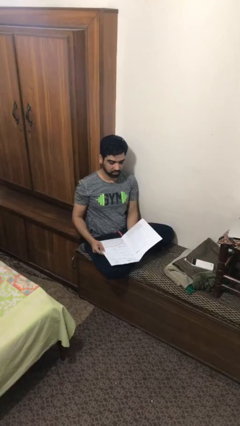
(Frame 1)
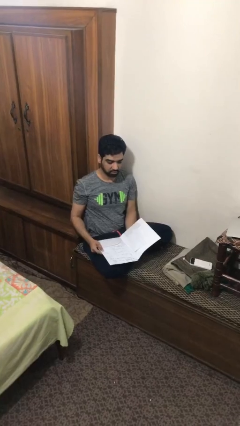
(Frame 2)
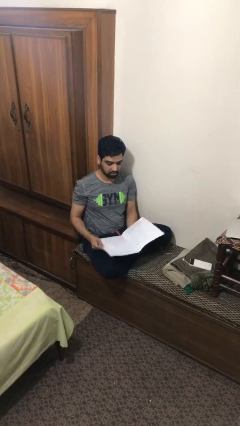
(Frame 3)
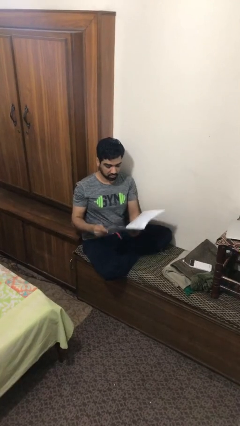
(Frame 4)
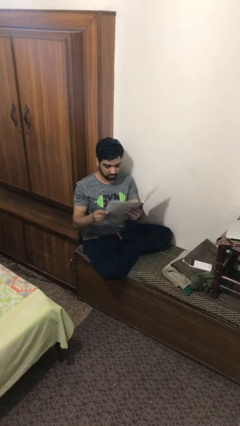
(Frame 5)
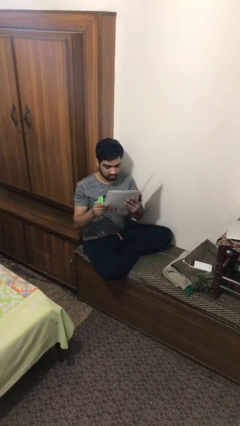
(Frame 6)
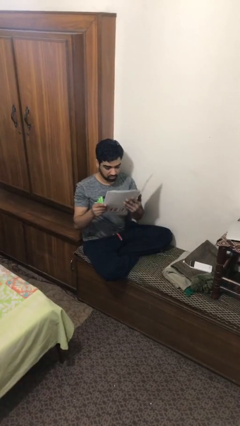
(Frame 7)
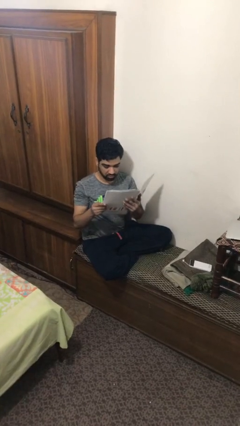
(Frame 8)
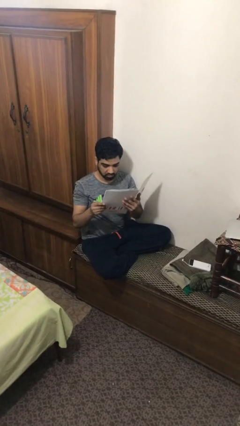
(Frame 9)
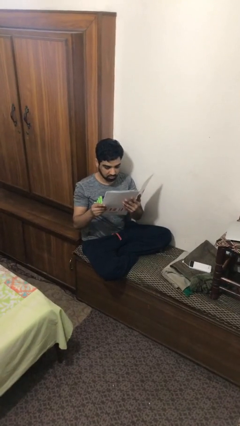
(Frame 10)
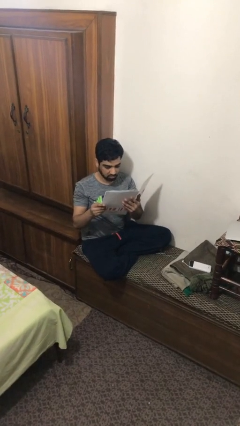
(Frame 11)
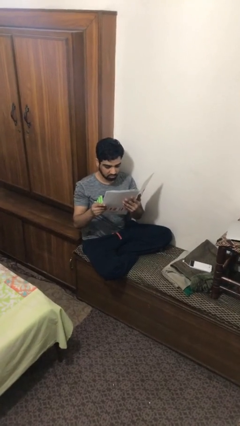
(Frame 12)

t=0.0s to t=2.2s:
person reads document

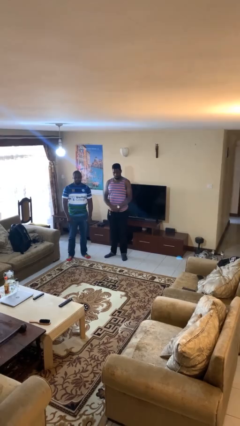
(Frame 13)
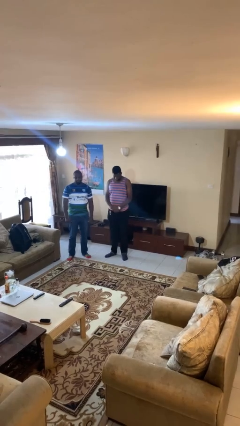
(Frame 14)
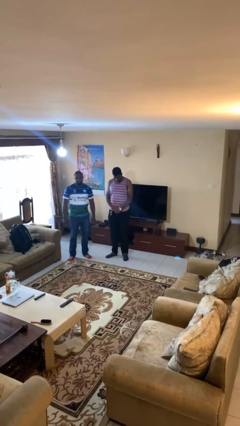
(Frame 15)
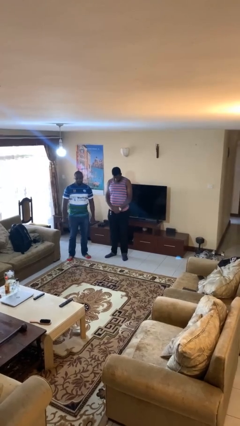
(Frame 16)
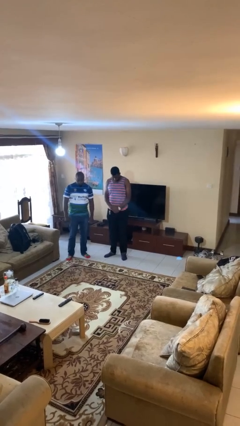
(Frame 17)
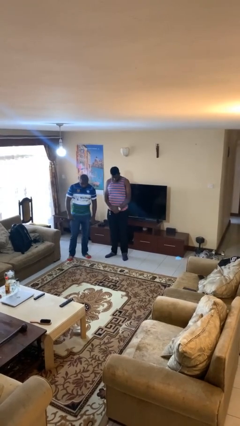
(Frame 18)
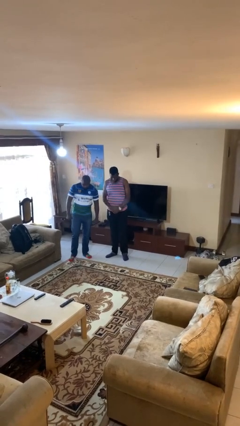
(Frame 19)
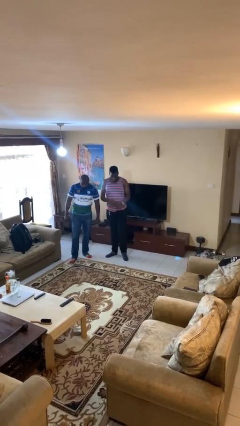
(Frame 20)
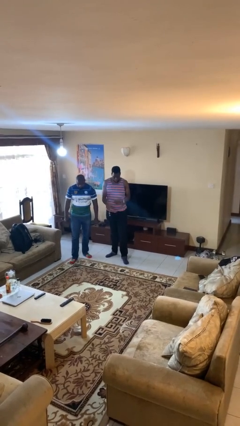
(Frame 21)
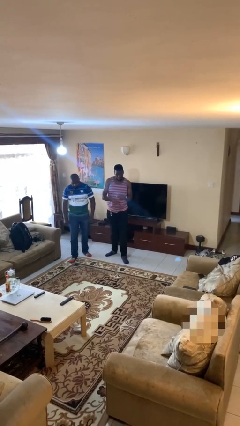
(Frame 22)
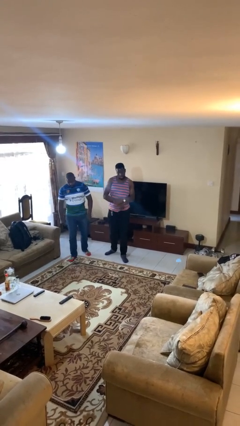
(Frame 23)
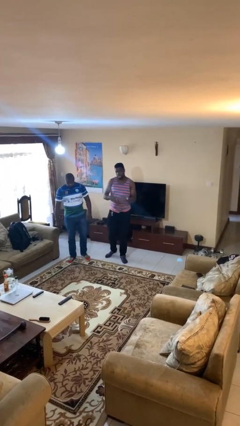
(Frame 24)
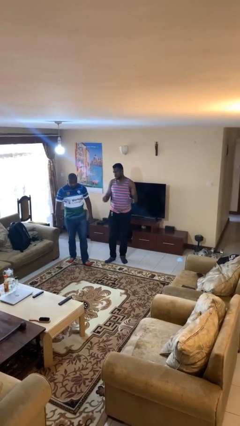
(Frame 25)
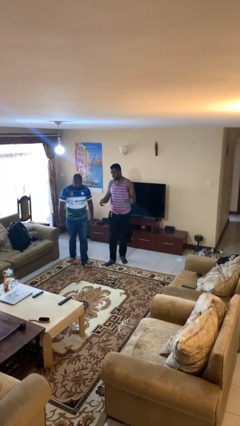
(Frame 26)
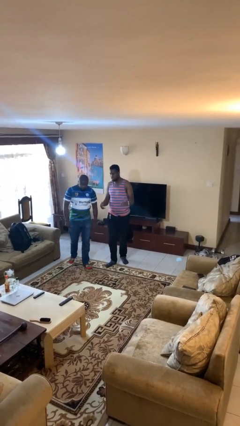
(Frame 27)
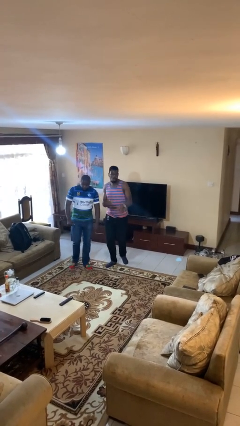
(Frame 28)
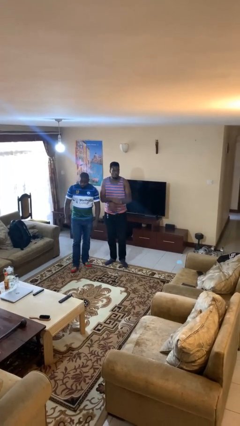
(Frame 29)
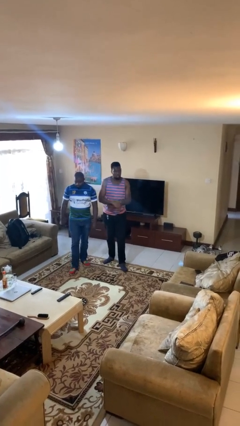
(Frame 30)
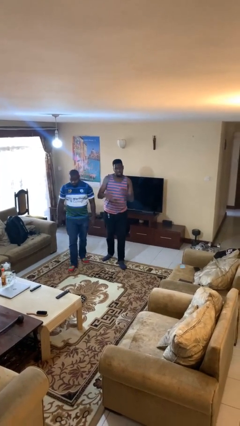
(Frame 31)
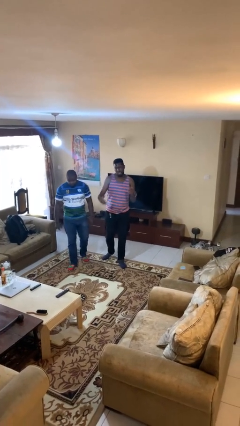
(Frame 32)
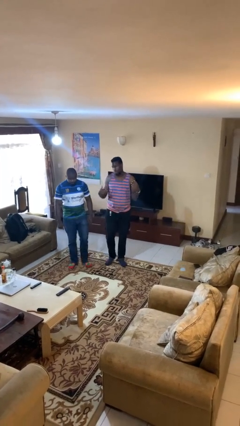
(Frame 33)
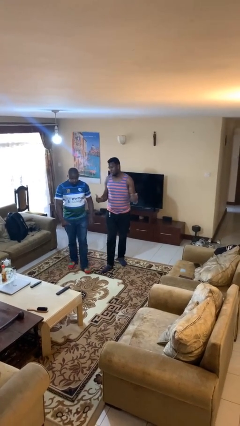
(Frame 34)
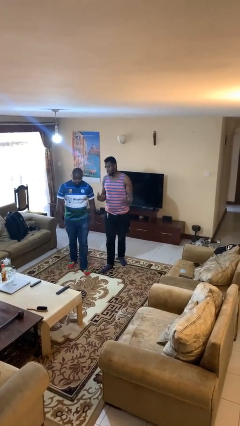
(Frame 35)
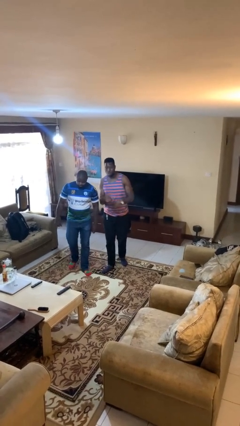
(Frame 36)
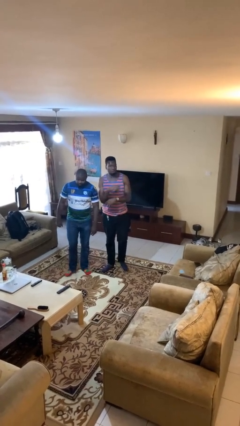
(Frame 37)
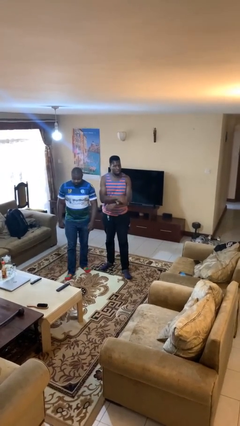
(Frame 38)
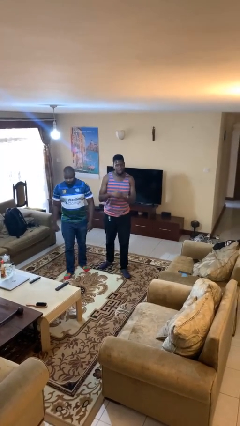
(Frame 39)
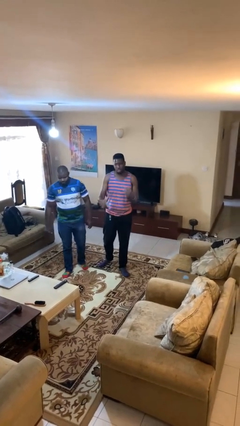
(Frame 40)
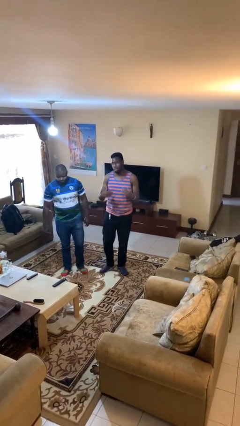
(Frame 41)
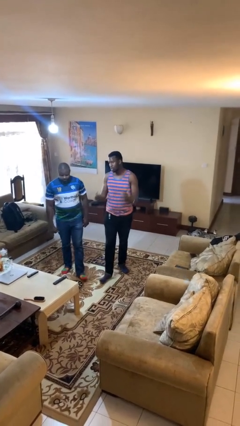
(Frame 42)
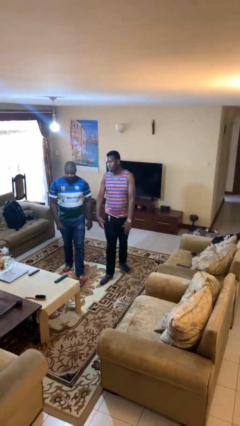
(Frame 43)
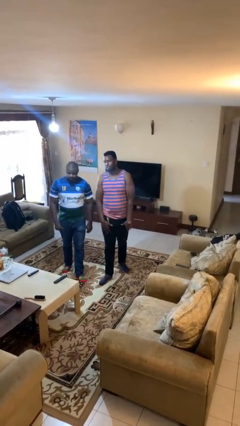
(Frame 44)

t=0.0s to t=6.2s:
person talks to person

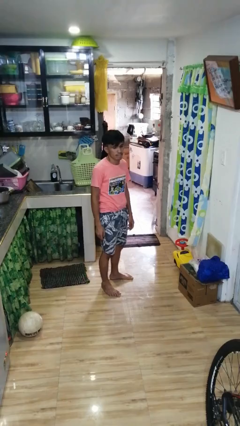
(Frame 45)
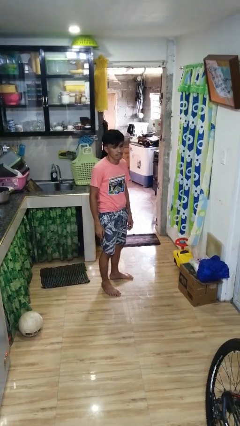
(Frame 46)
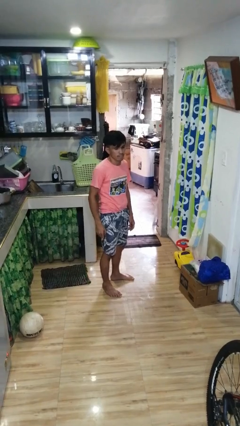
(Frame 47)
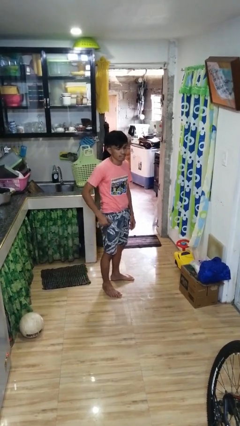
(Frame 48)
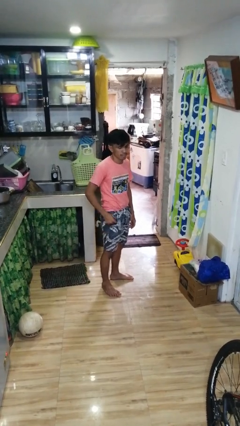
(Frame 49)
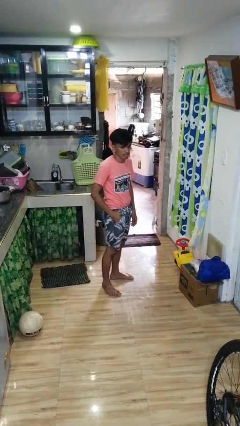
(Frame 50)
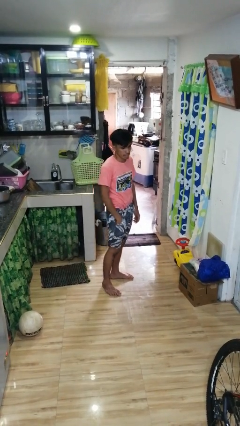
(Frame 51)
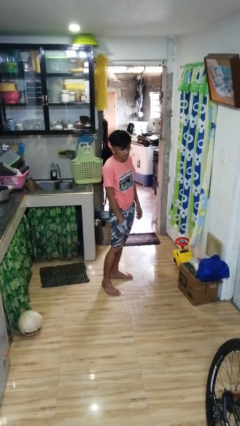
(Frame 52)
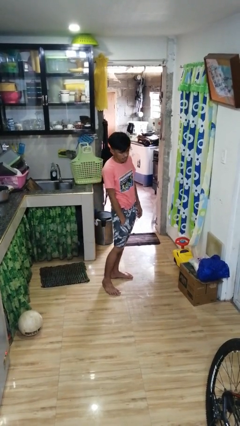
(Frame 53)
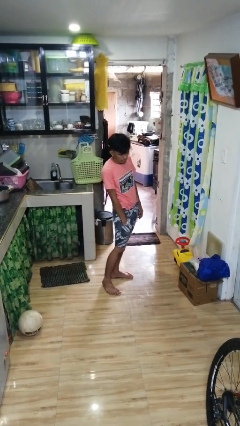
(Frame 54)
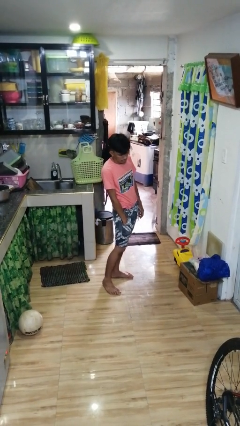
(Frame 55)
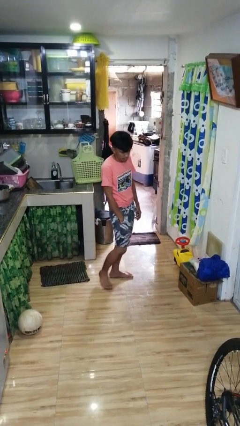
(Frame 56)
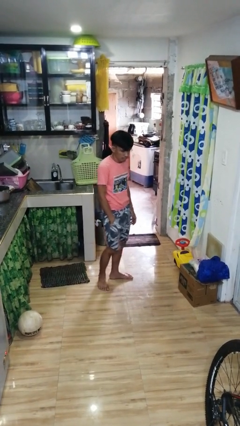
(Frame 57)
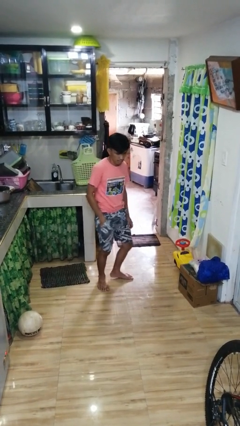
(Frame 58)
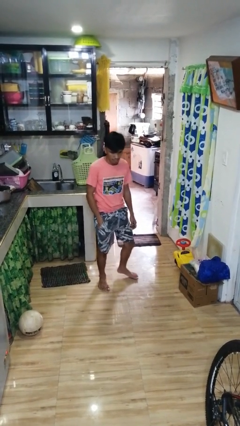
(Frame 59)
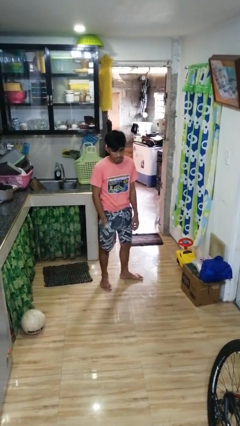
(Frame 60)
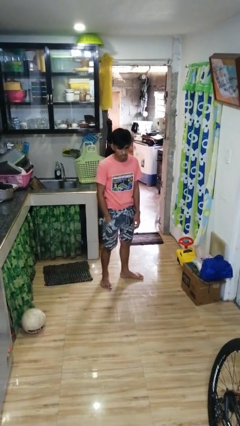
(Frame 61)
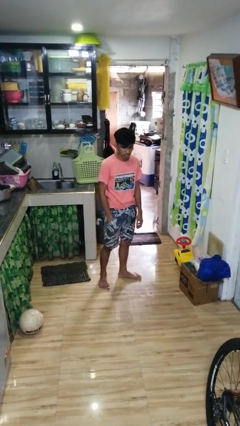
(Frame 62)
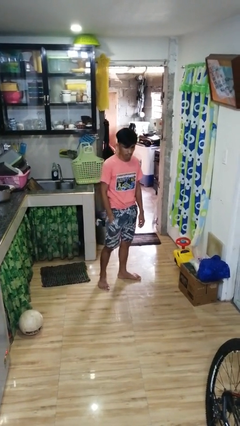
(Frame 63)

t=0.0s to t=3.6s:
person puts hands in back pockets

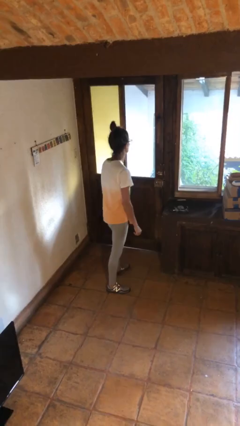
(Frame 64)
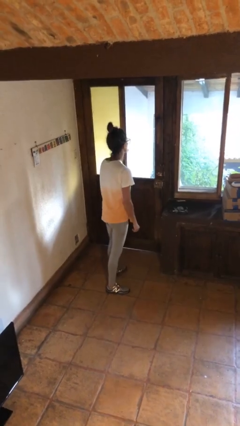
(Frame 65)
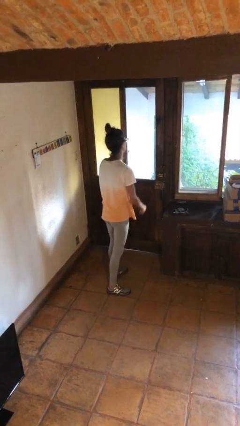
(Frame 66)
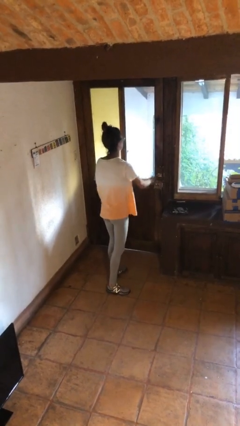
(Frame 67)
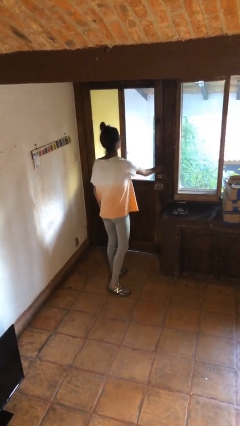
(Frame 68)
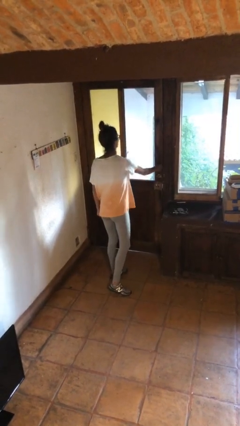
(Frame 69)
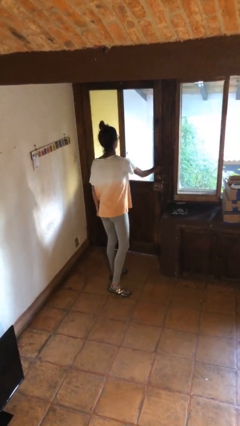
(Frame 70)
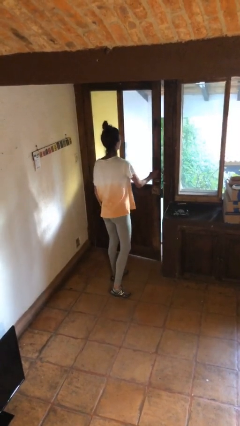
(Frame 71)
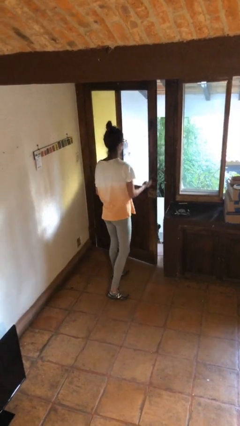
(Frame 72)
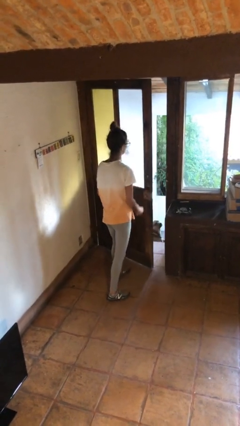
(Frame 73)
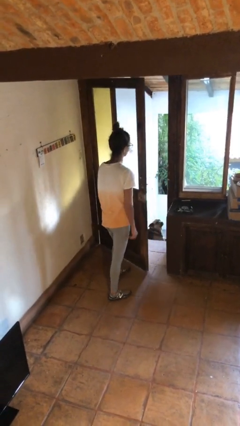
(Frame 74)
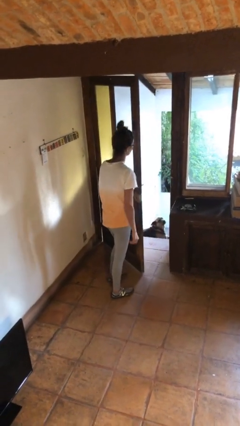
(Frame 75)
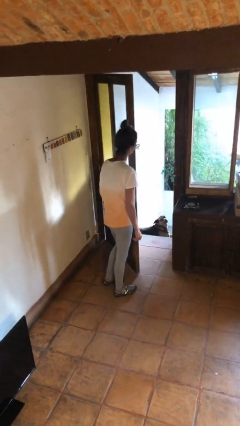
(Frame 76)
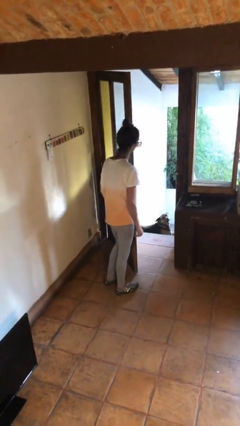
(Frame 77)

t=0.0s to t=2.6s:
person opens facility door

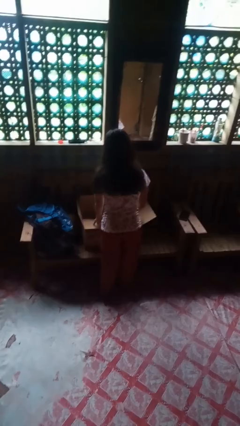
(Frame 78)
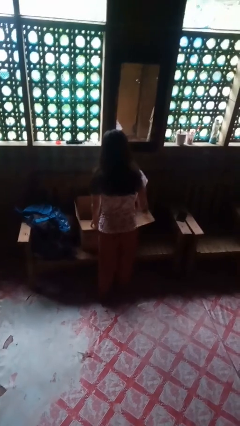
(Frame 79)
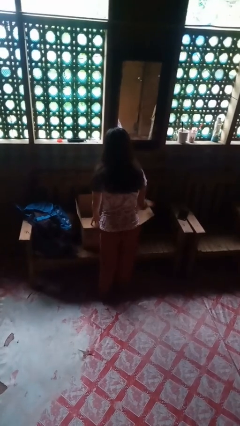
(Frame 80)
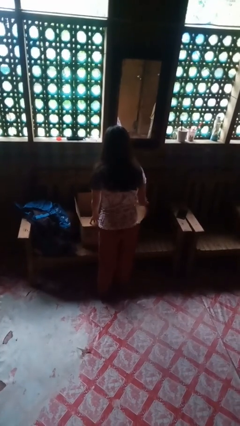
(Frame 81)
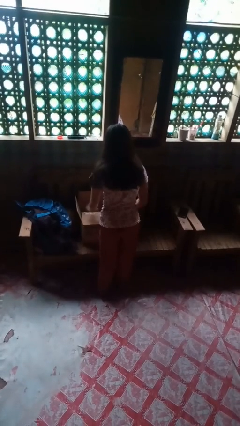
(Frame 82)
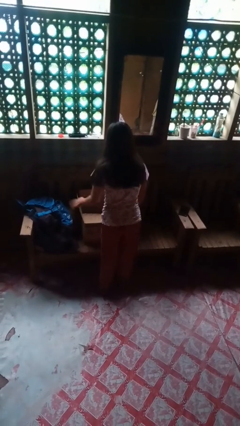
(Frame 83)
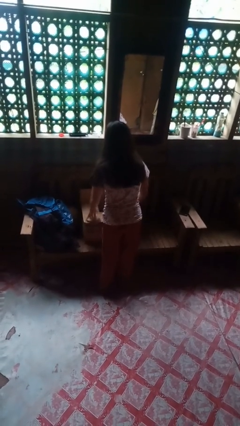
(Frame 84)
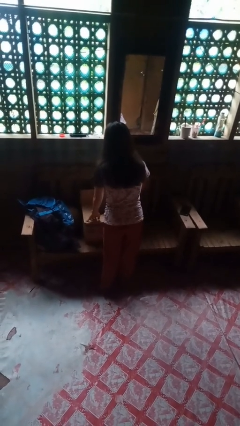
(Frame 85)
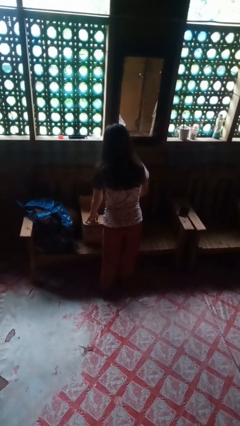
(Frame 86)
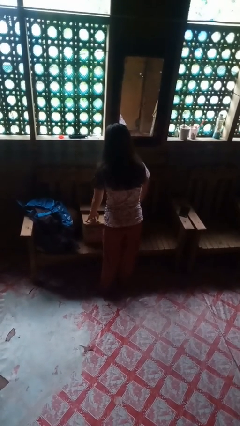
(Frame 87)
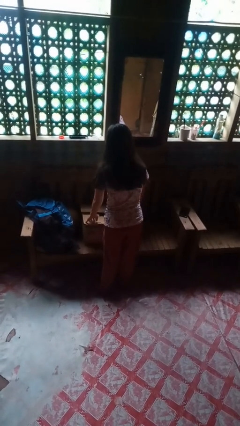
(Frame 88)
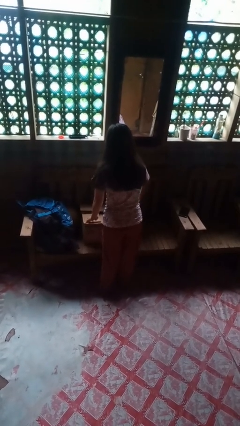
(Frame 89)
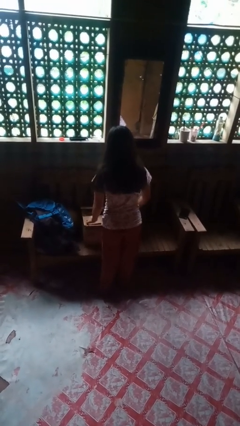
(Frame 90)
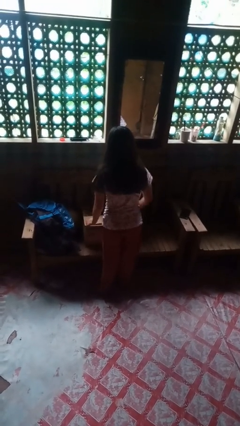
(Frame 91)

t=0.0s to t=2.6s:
person closes box

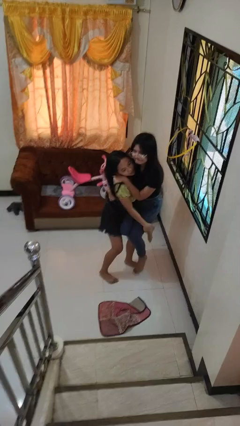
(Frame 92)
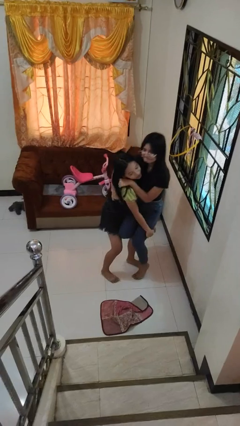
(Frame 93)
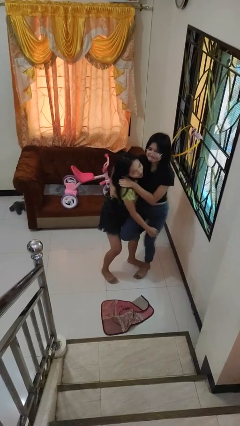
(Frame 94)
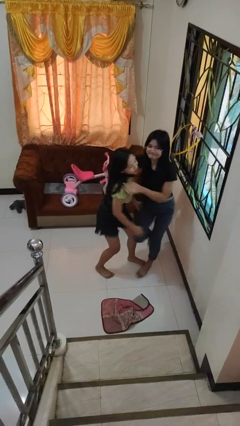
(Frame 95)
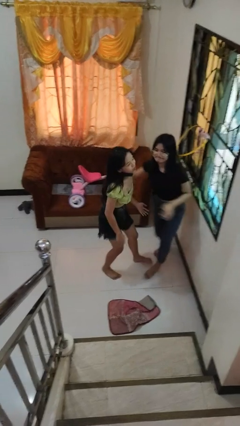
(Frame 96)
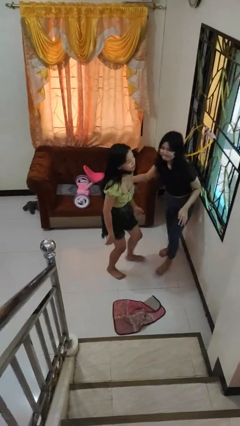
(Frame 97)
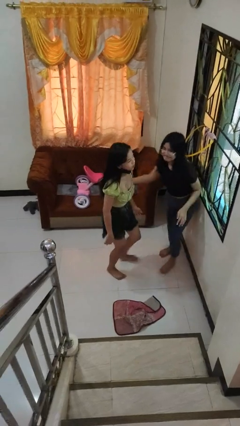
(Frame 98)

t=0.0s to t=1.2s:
person puts down person
